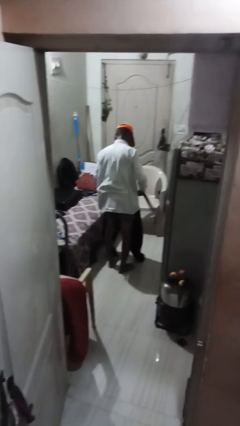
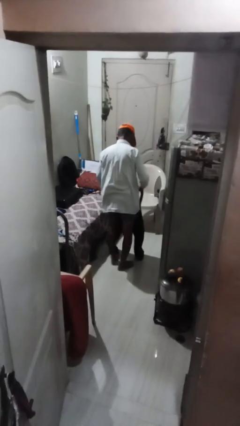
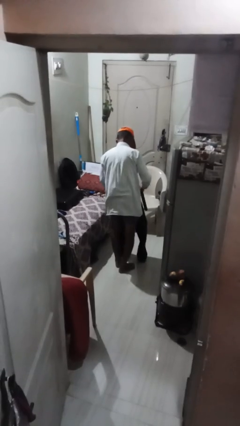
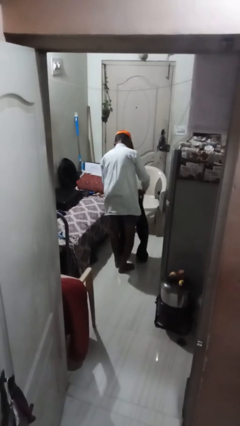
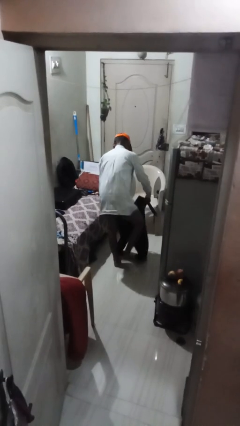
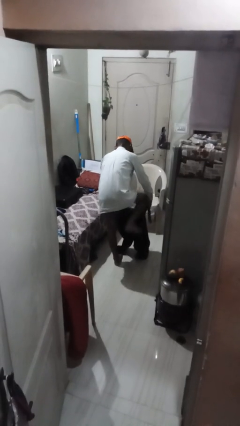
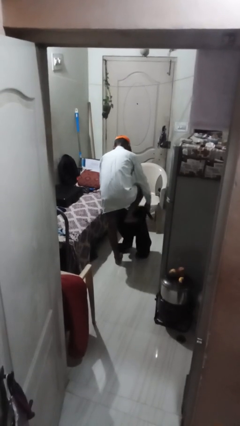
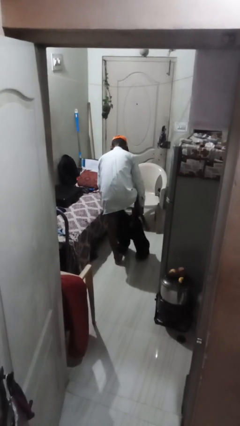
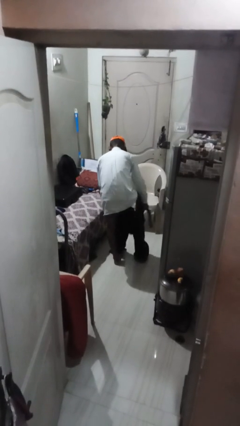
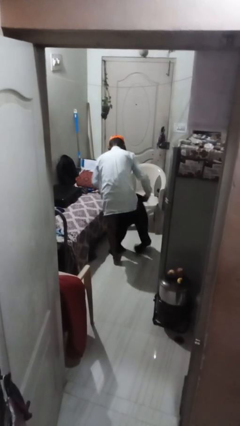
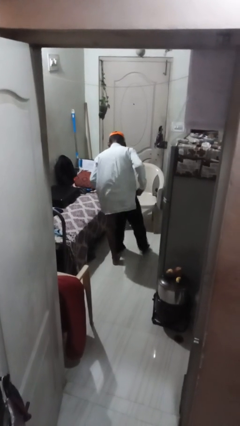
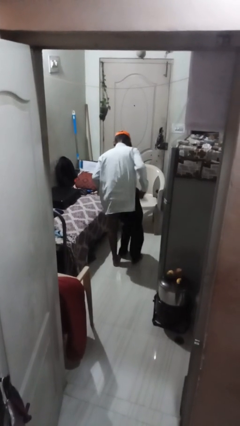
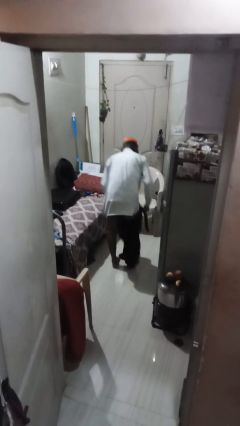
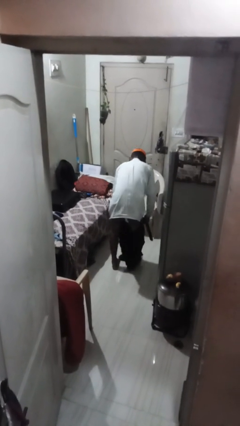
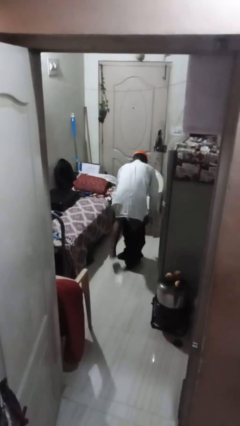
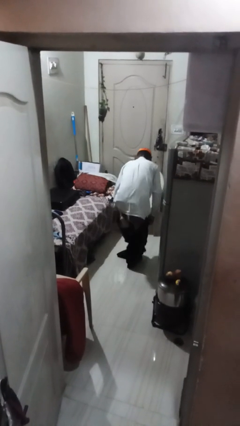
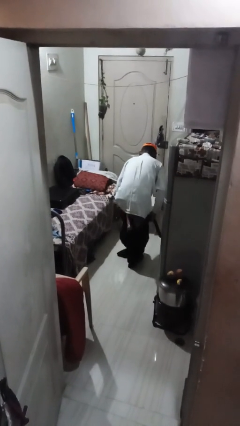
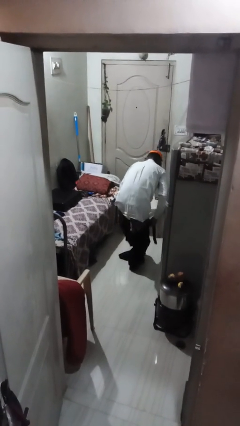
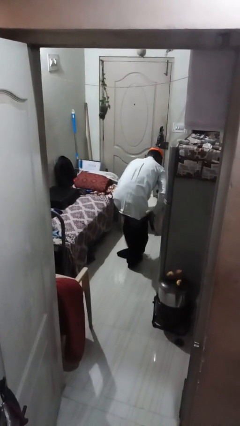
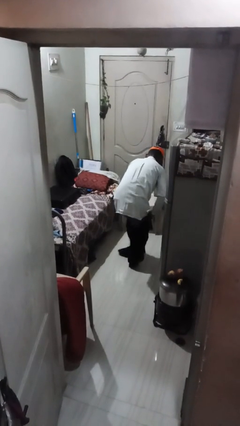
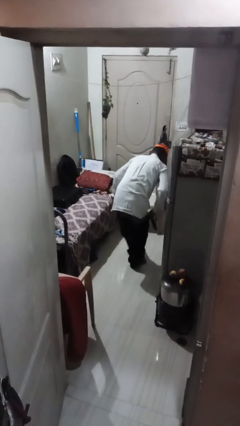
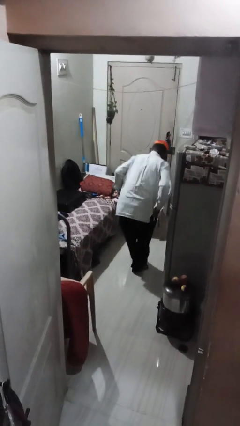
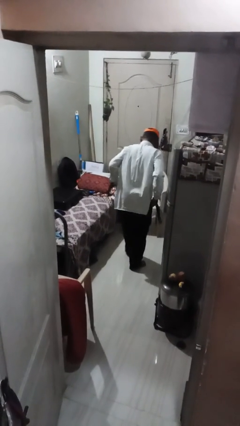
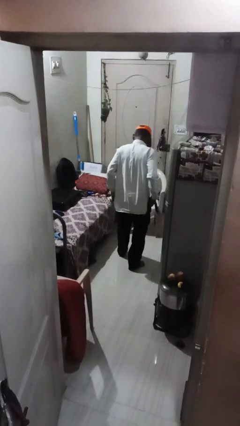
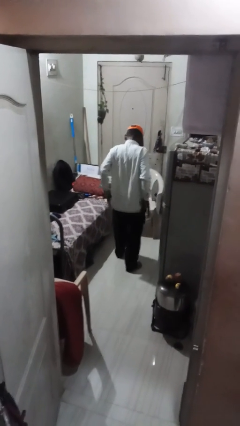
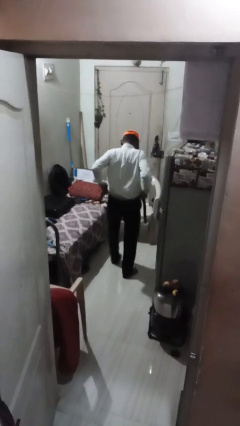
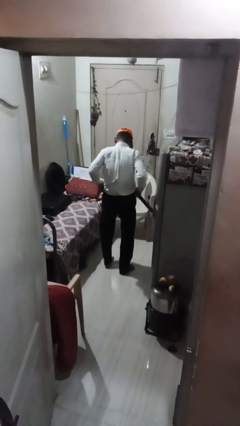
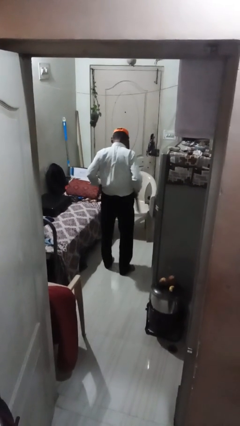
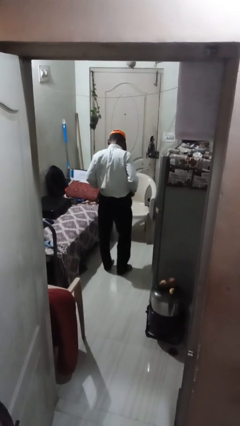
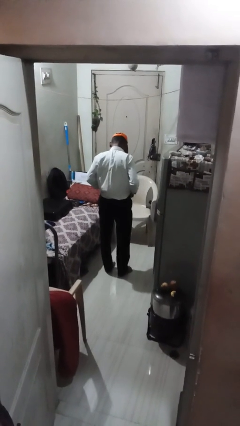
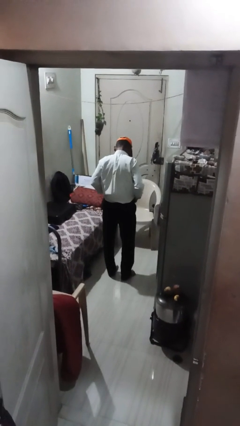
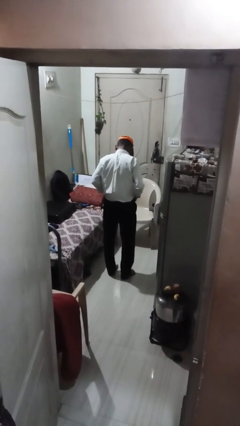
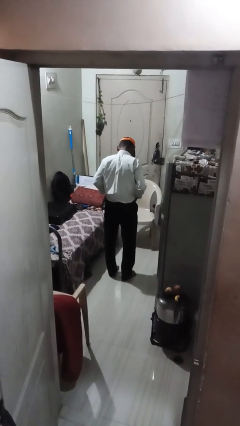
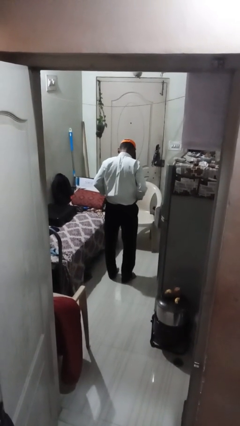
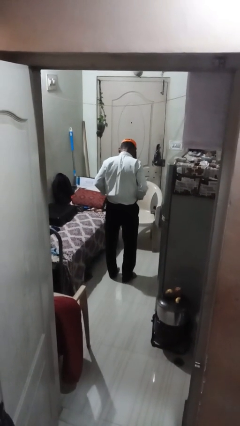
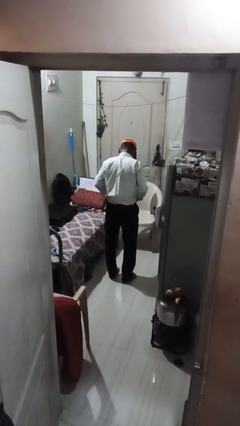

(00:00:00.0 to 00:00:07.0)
person puts on pants

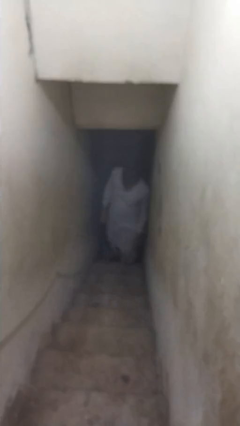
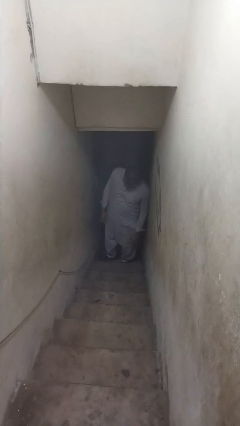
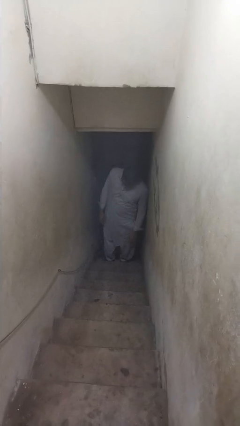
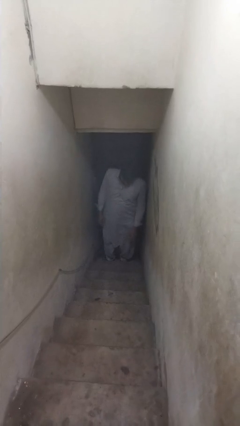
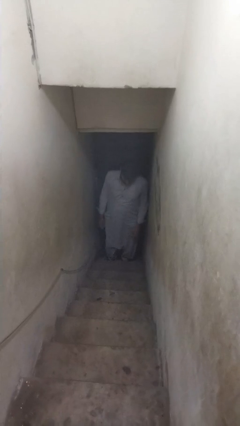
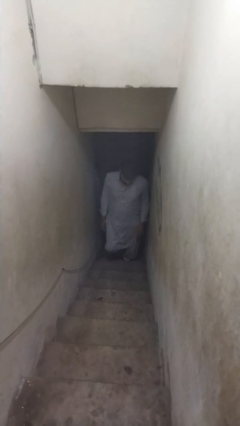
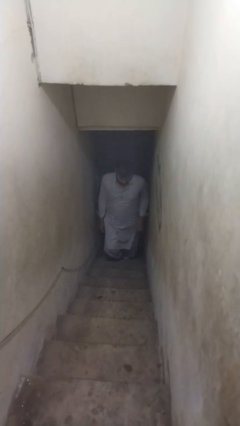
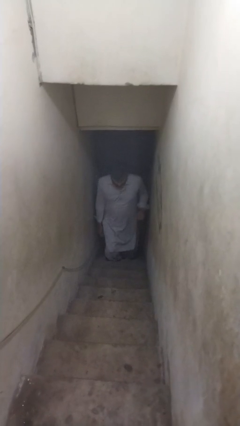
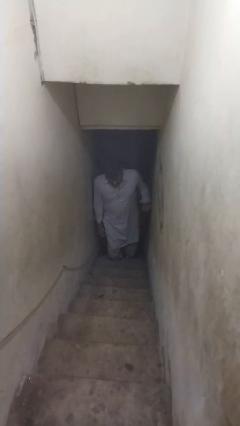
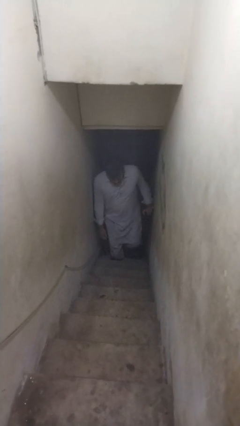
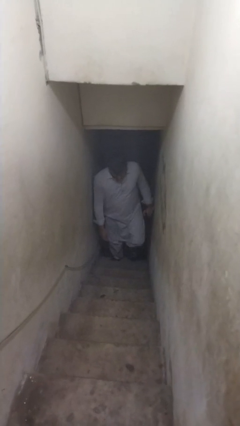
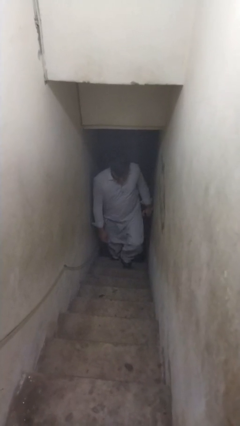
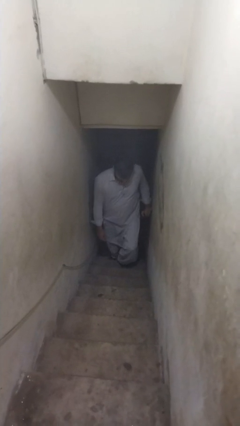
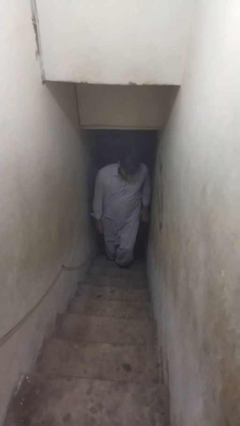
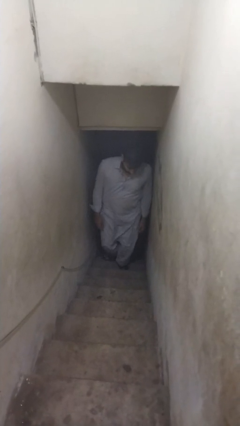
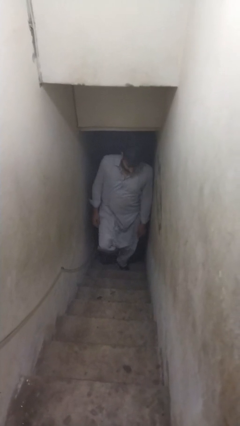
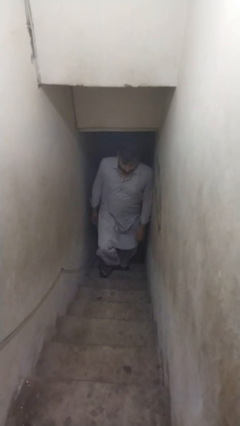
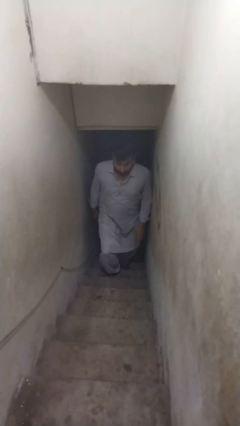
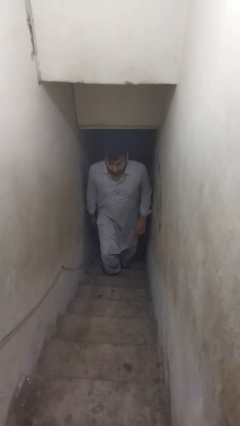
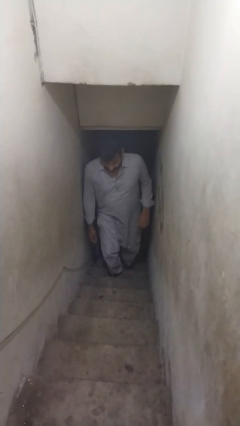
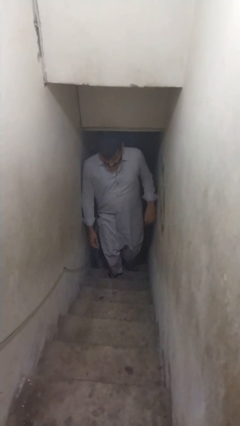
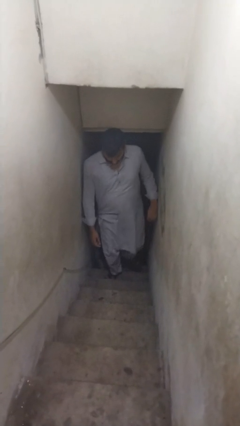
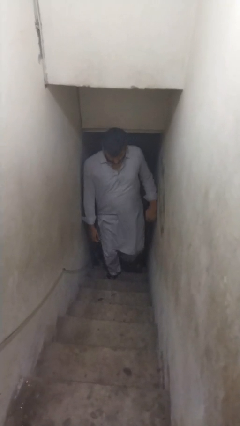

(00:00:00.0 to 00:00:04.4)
person climbs up stairs

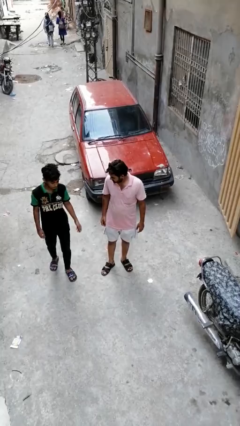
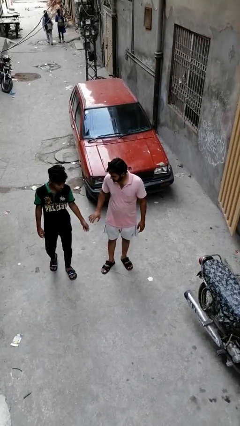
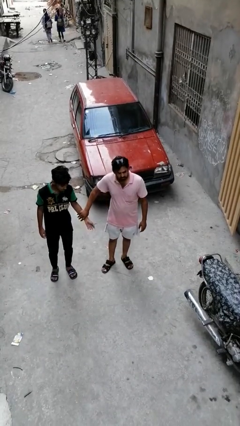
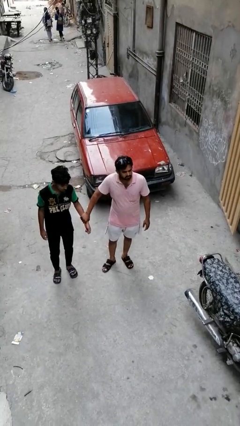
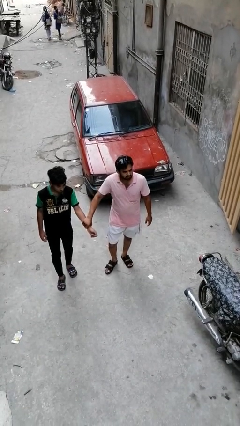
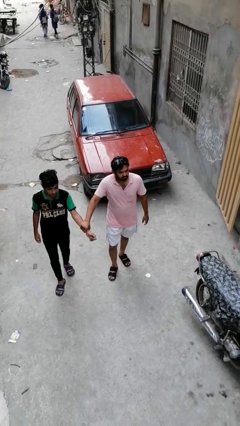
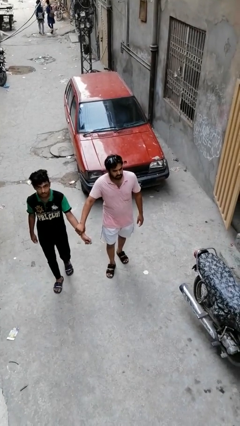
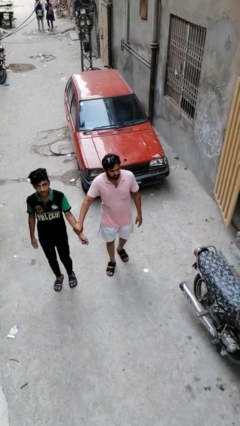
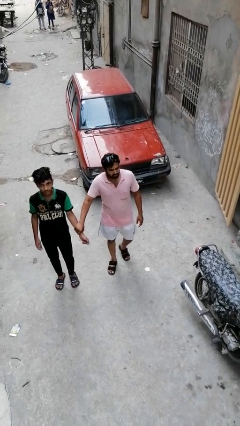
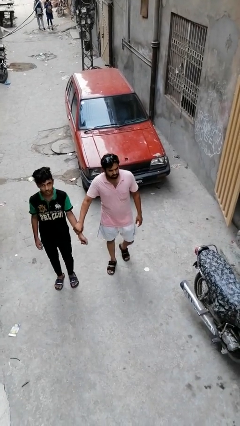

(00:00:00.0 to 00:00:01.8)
person grabs person by forearm

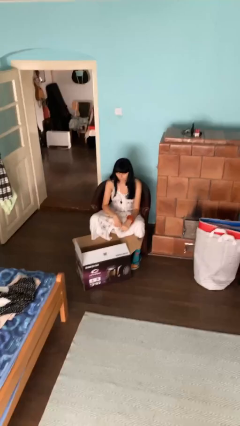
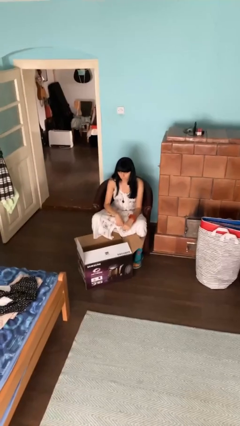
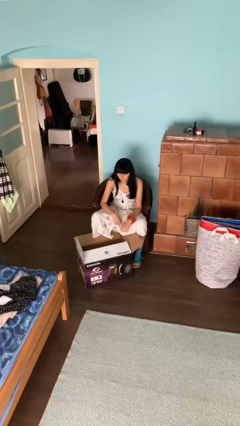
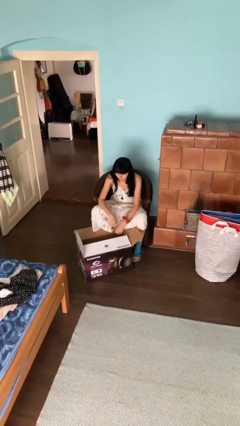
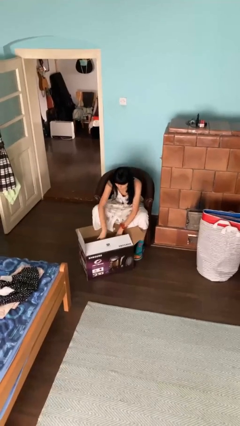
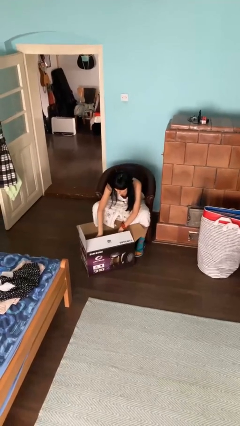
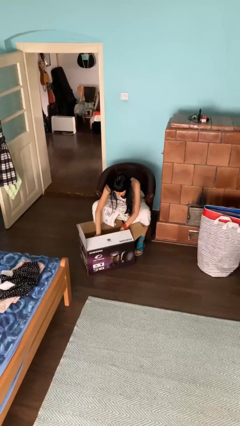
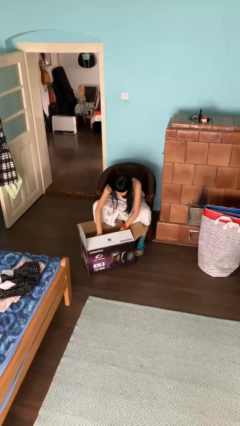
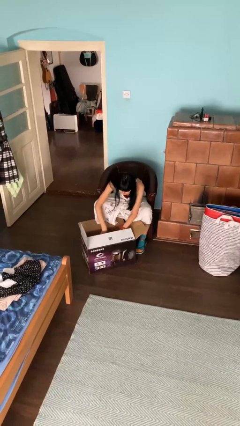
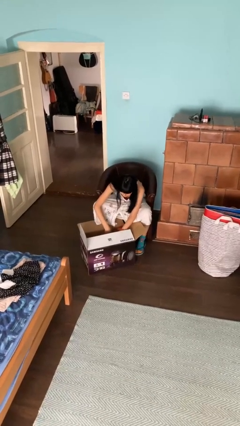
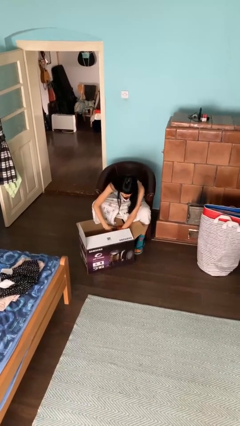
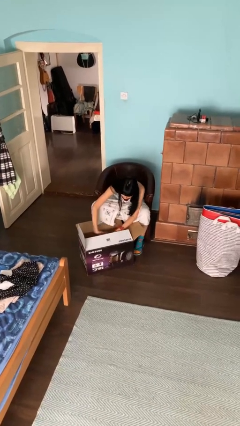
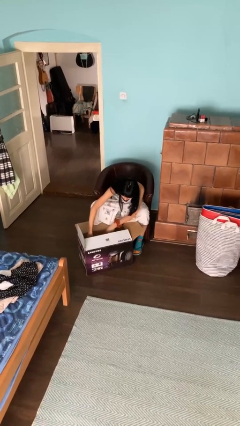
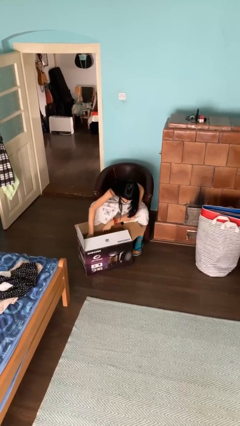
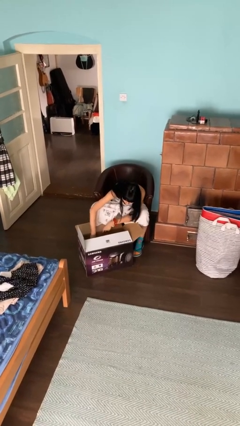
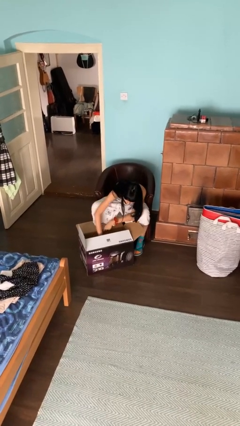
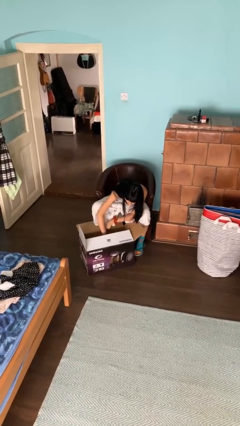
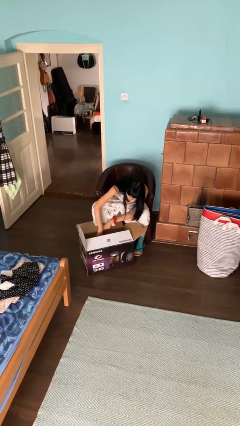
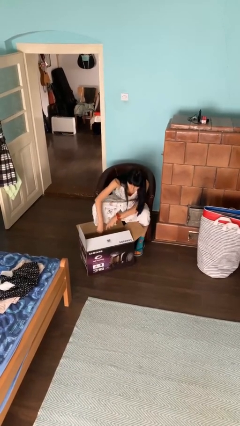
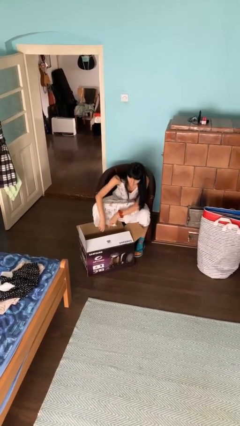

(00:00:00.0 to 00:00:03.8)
person searches in box

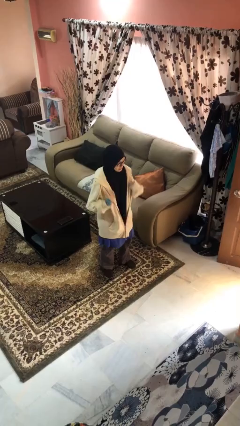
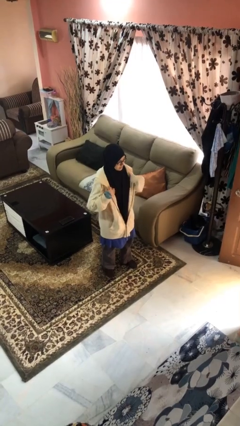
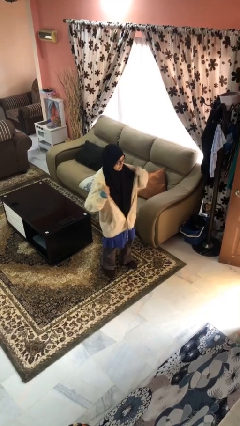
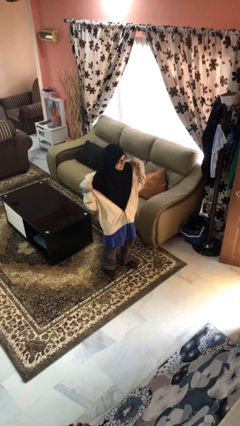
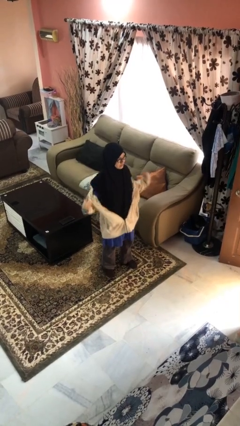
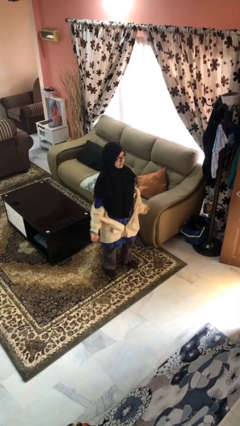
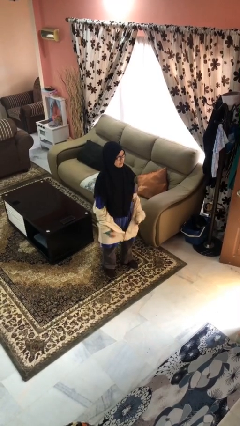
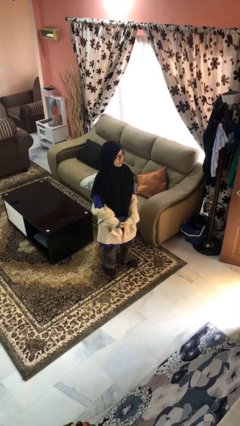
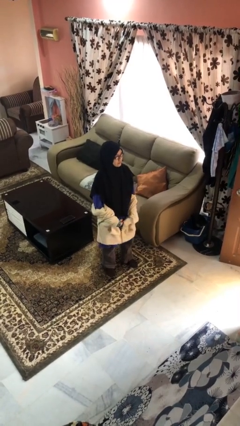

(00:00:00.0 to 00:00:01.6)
person takes off jacket
